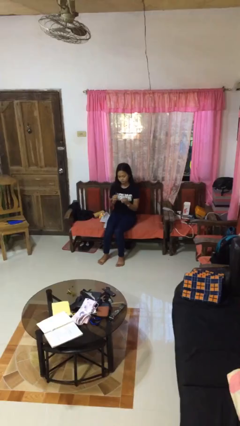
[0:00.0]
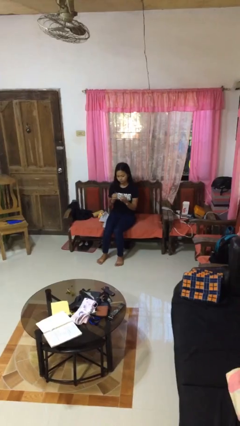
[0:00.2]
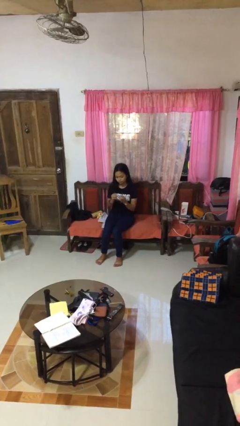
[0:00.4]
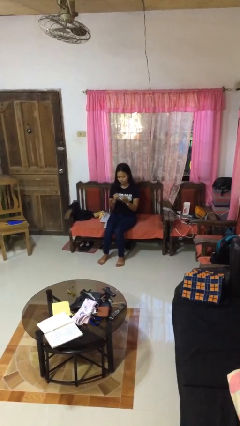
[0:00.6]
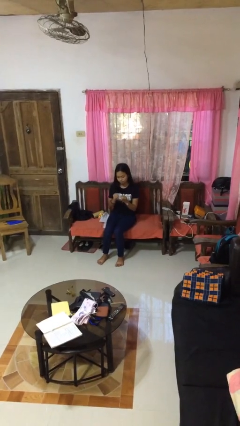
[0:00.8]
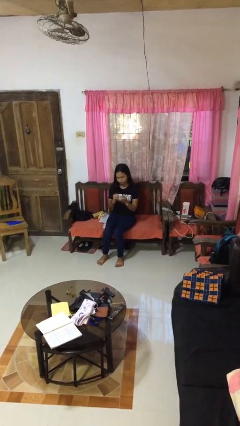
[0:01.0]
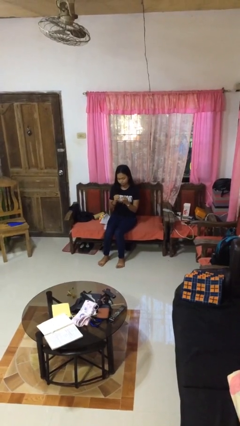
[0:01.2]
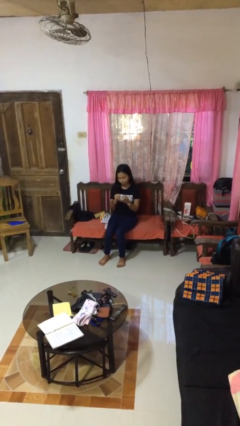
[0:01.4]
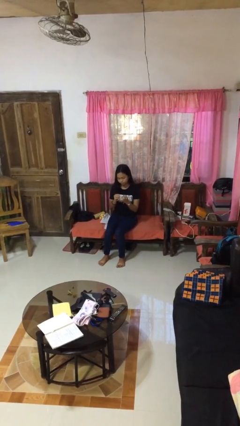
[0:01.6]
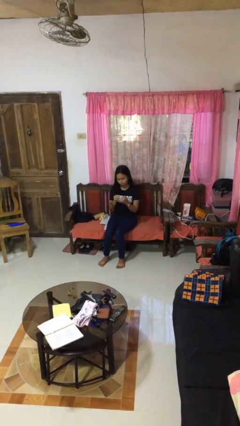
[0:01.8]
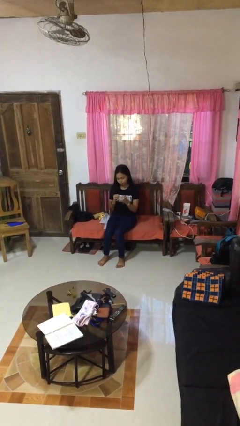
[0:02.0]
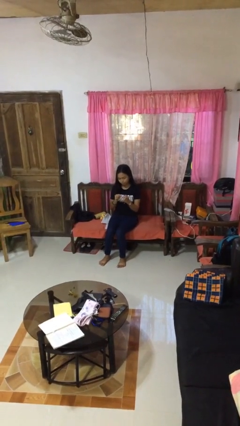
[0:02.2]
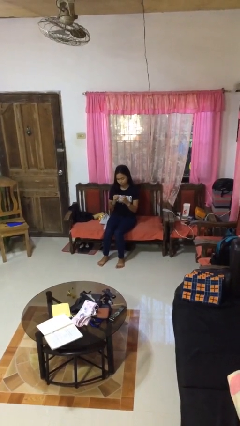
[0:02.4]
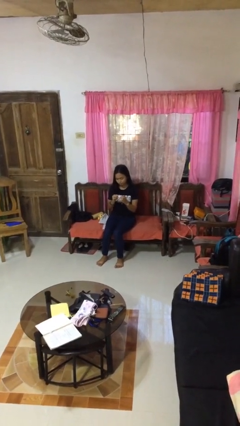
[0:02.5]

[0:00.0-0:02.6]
person clips fingernails

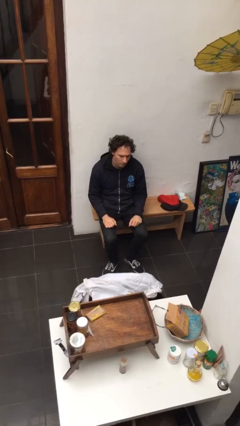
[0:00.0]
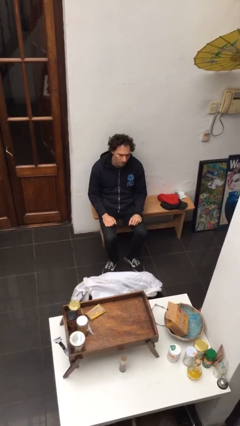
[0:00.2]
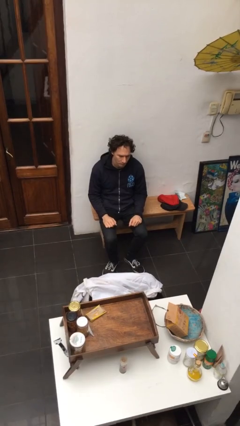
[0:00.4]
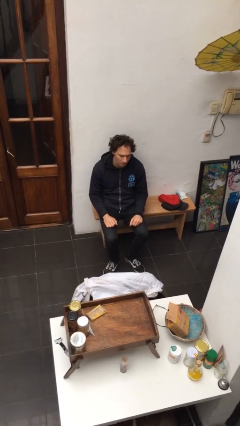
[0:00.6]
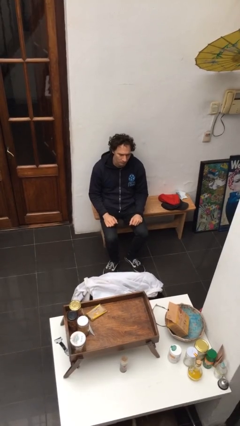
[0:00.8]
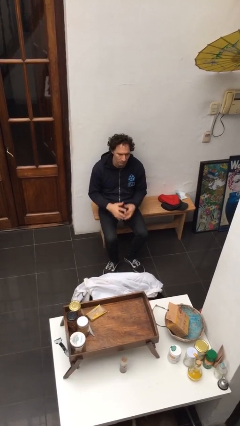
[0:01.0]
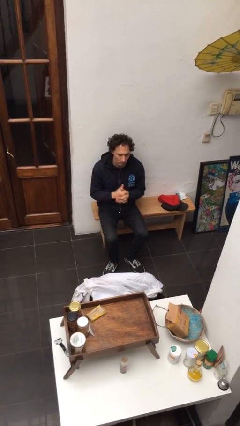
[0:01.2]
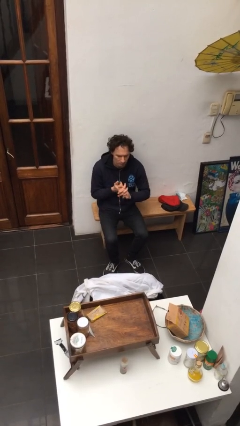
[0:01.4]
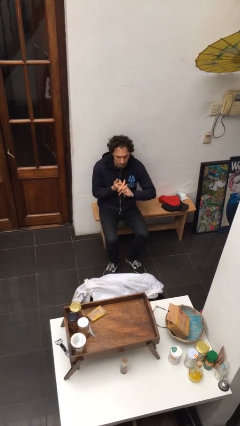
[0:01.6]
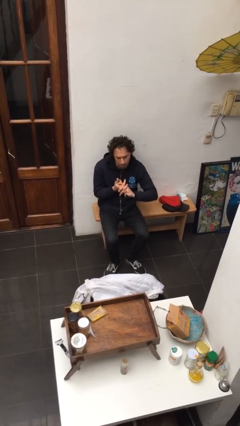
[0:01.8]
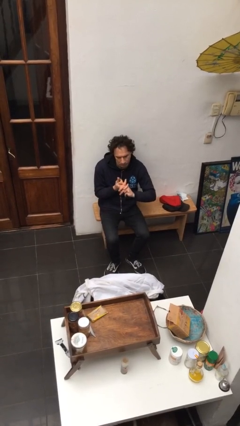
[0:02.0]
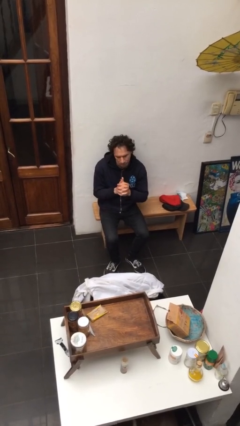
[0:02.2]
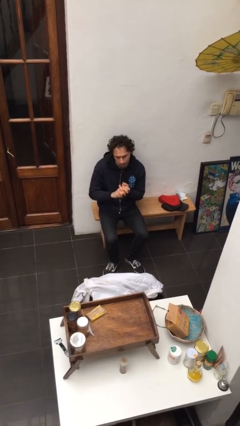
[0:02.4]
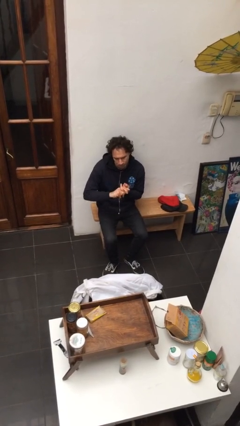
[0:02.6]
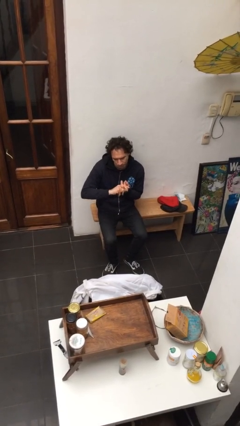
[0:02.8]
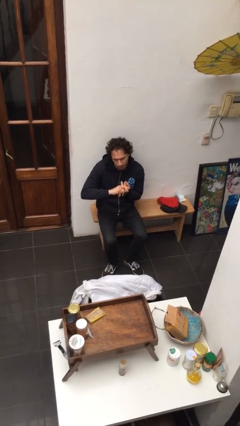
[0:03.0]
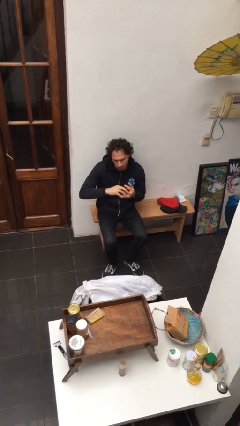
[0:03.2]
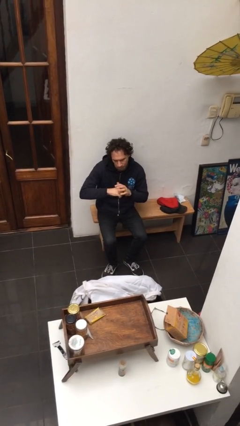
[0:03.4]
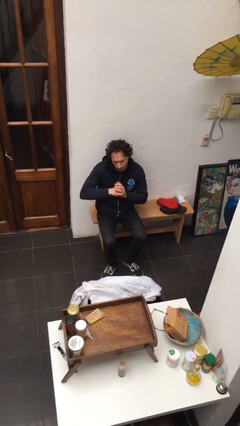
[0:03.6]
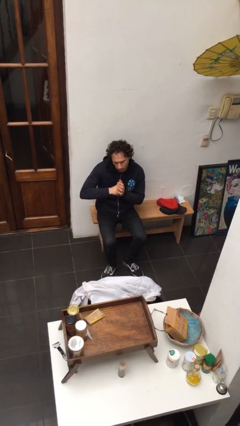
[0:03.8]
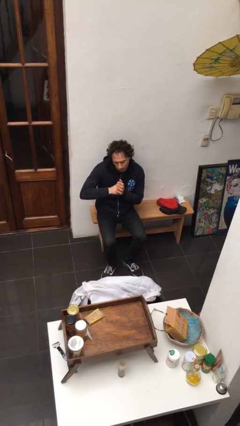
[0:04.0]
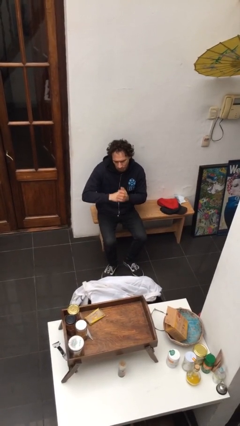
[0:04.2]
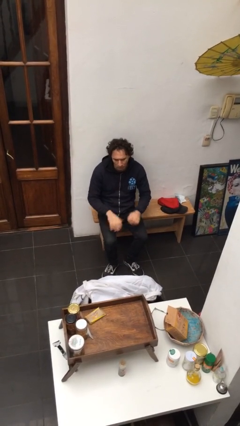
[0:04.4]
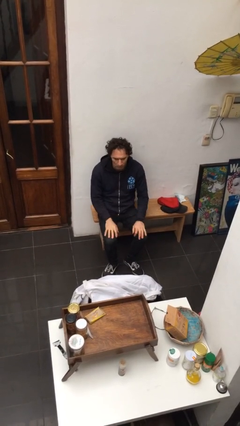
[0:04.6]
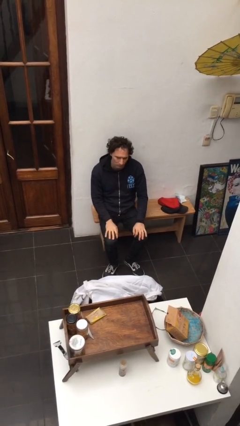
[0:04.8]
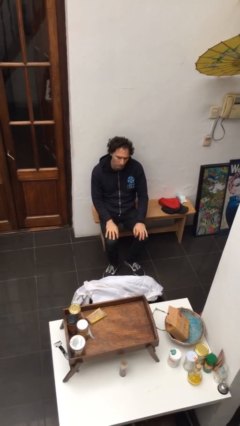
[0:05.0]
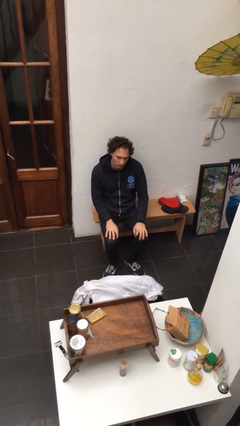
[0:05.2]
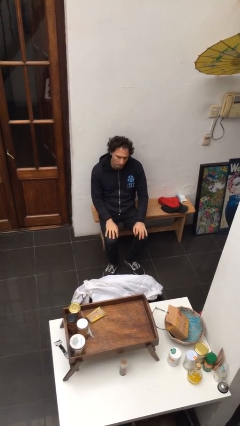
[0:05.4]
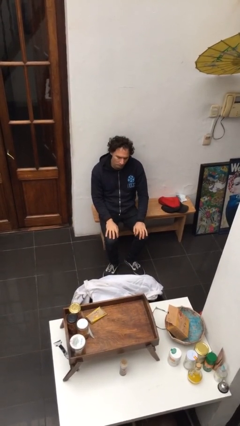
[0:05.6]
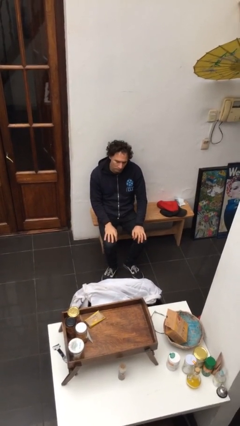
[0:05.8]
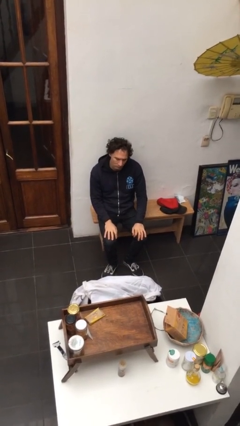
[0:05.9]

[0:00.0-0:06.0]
person cracks knuckles

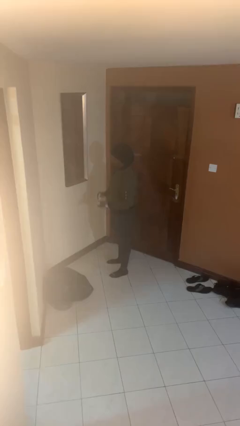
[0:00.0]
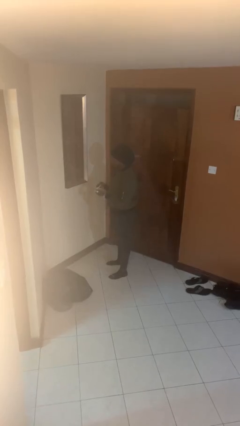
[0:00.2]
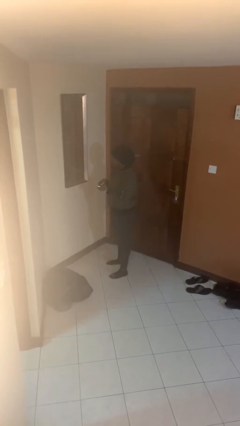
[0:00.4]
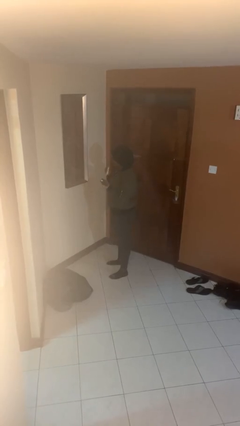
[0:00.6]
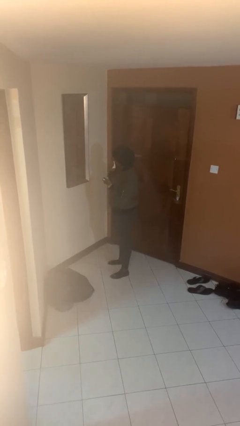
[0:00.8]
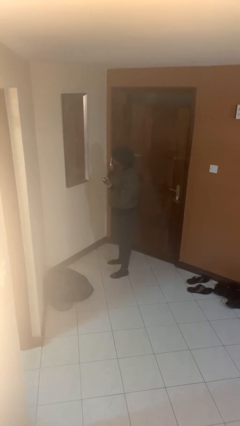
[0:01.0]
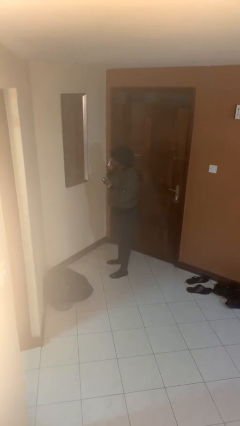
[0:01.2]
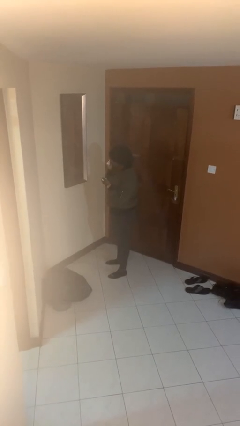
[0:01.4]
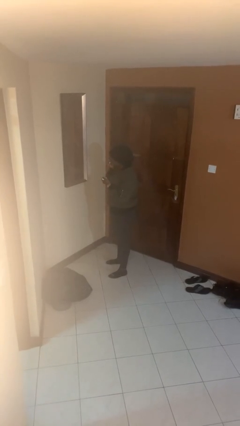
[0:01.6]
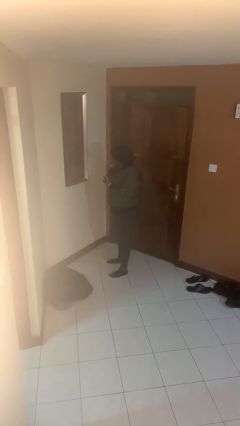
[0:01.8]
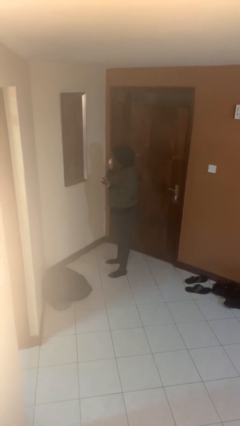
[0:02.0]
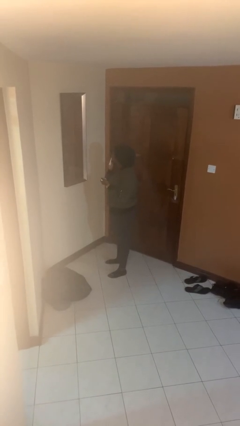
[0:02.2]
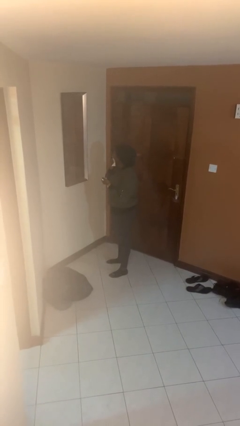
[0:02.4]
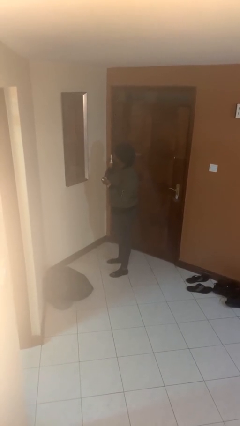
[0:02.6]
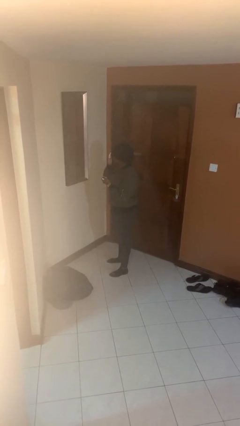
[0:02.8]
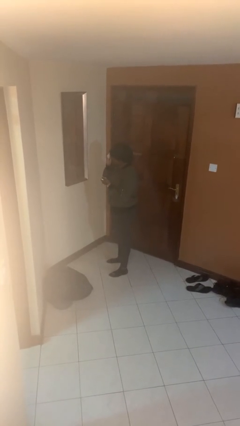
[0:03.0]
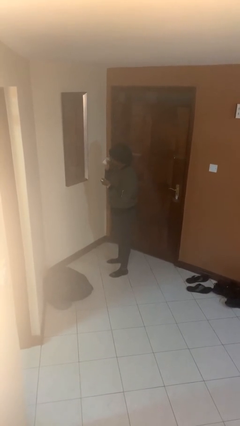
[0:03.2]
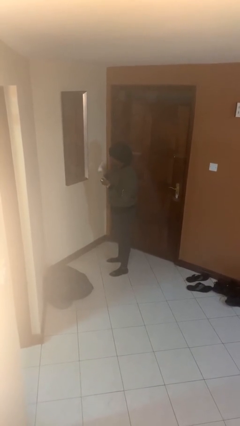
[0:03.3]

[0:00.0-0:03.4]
person applies foundation makeup

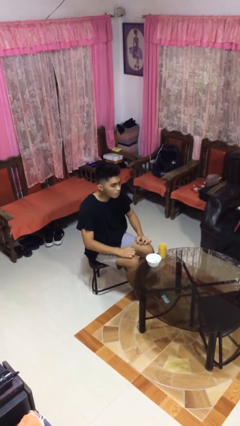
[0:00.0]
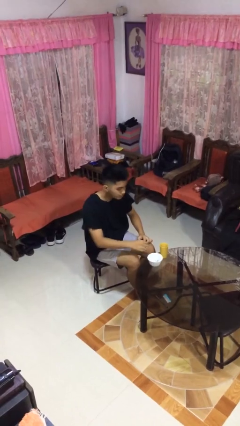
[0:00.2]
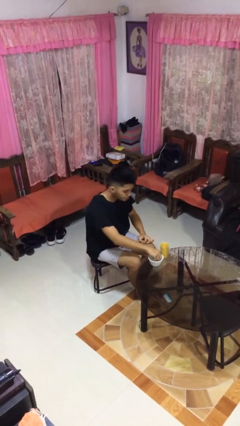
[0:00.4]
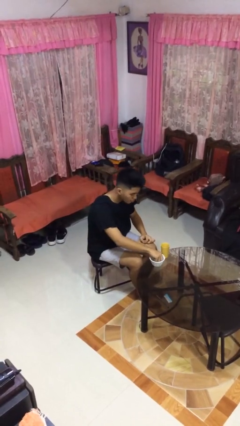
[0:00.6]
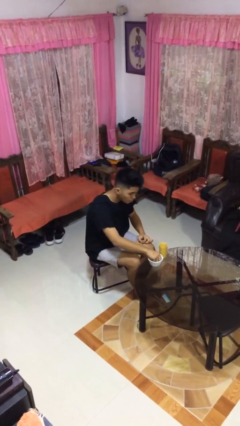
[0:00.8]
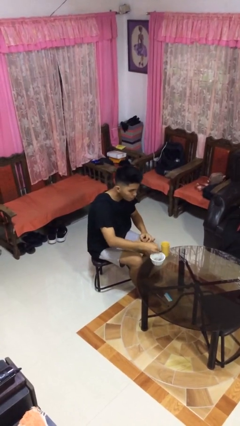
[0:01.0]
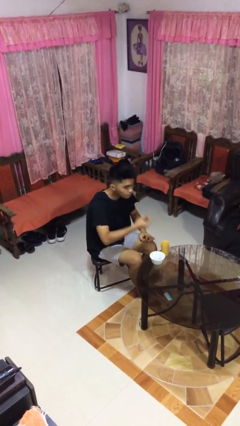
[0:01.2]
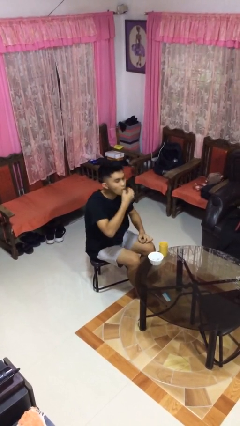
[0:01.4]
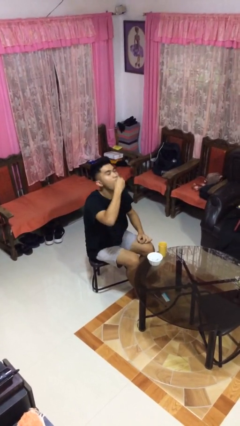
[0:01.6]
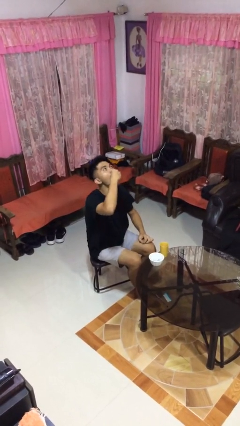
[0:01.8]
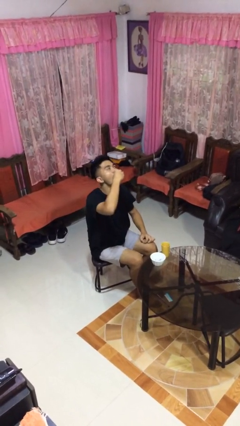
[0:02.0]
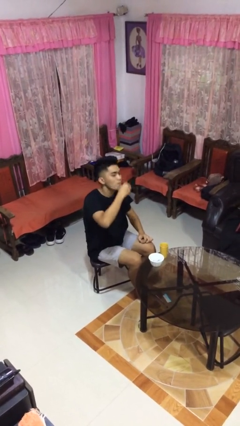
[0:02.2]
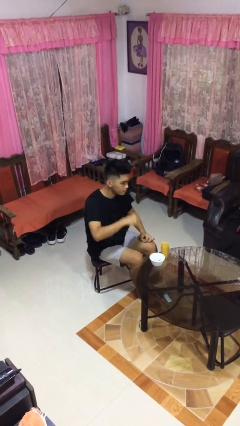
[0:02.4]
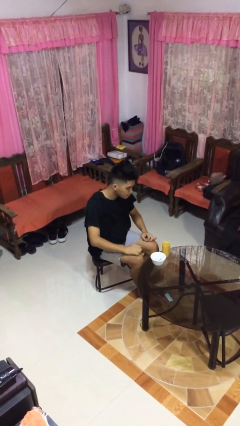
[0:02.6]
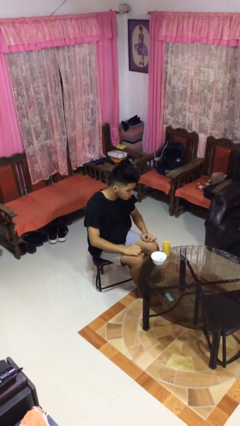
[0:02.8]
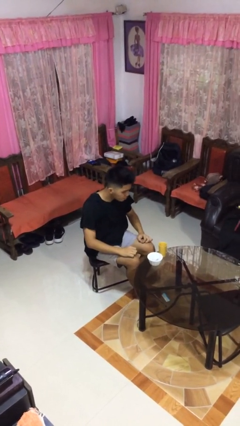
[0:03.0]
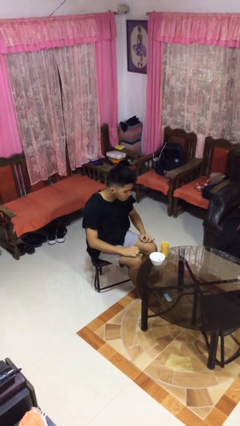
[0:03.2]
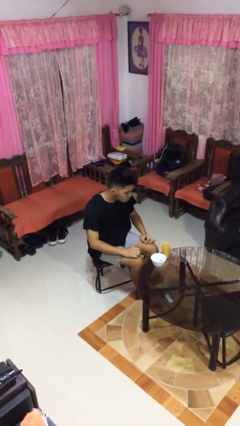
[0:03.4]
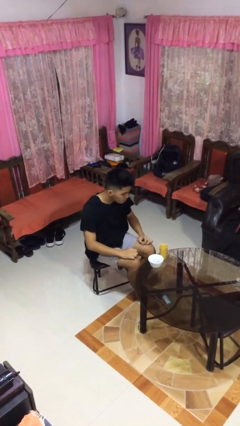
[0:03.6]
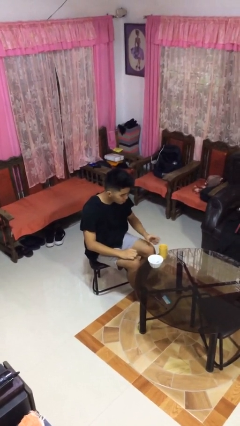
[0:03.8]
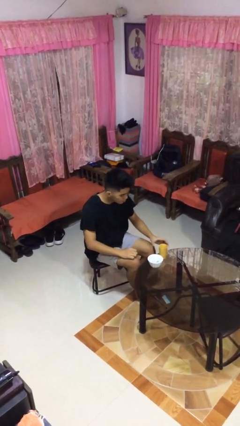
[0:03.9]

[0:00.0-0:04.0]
person takes medicine pills

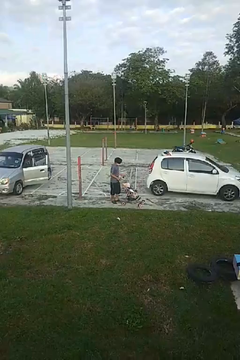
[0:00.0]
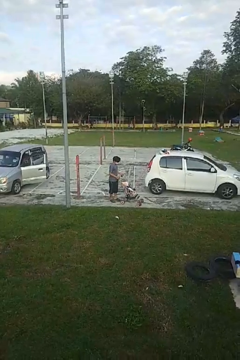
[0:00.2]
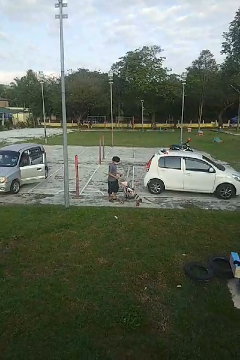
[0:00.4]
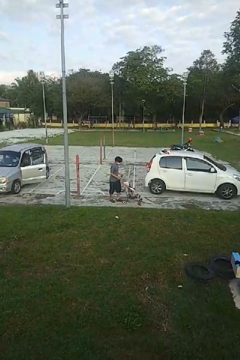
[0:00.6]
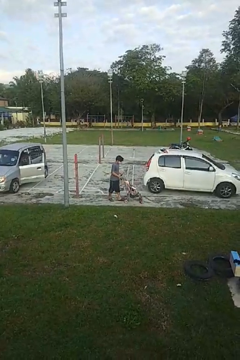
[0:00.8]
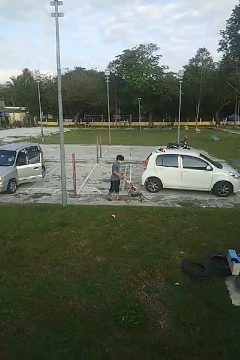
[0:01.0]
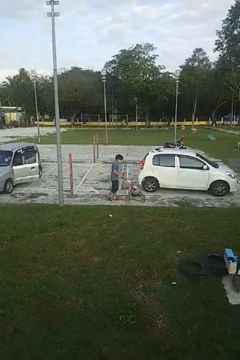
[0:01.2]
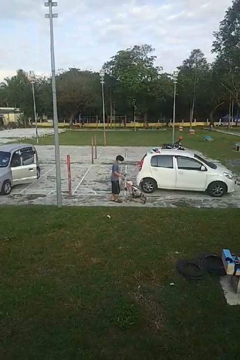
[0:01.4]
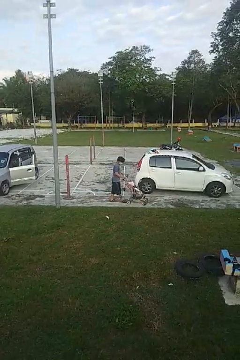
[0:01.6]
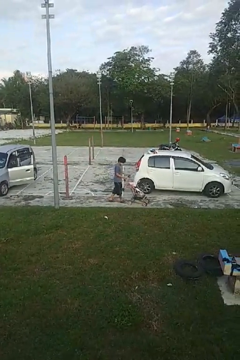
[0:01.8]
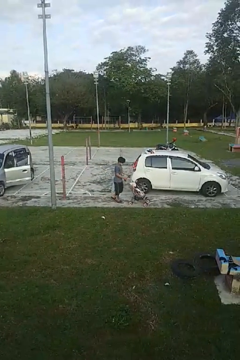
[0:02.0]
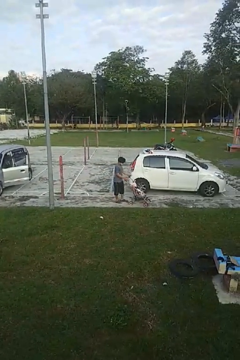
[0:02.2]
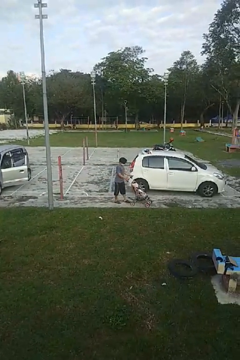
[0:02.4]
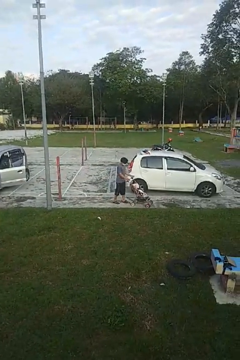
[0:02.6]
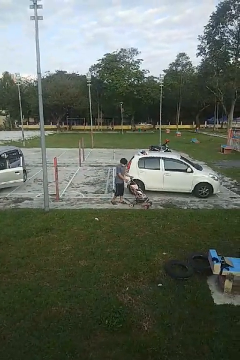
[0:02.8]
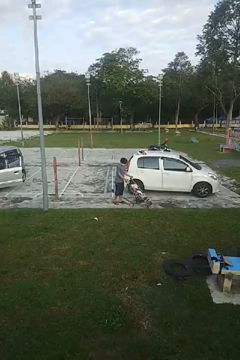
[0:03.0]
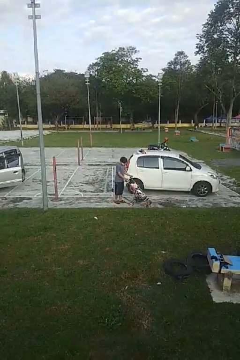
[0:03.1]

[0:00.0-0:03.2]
person pushes wheeled cart
